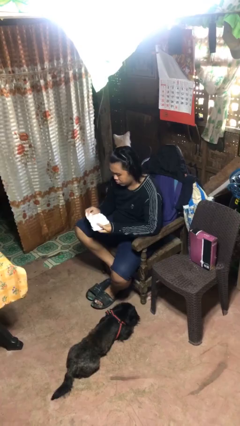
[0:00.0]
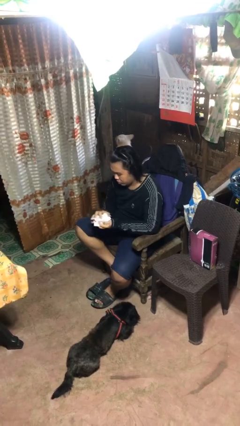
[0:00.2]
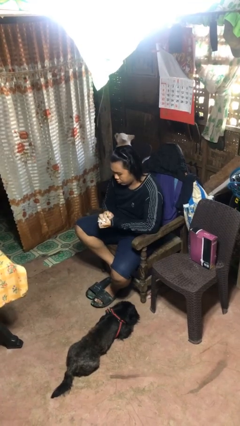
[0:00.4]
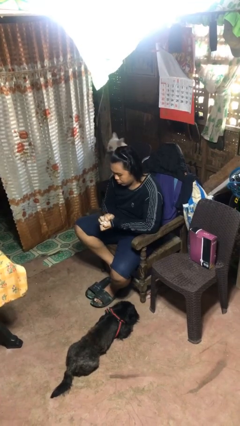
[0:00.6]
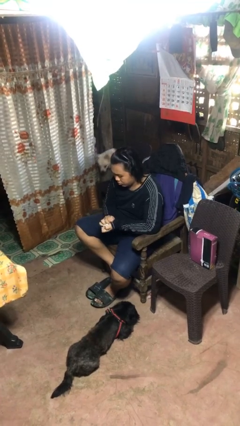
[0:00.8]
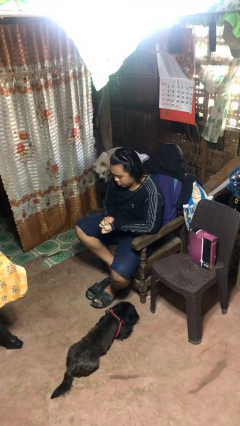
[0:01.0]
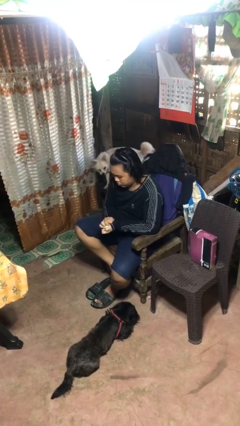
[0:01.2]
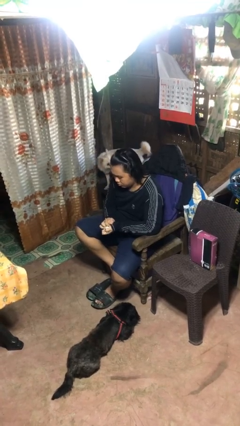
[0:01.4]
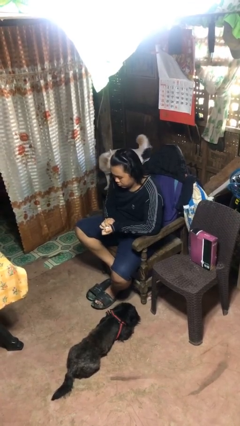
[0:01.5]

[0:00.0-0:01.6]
person crumples paper

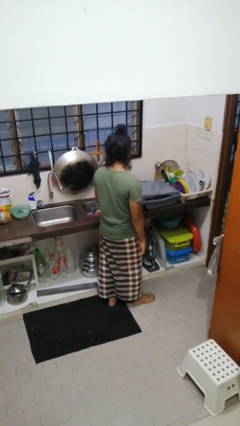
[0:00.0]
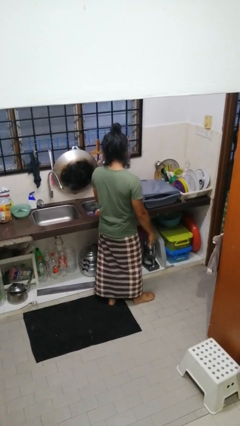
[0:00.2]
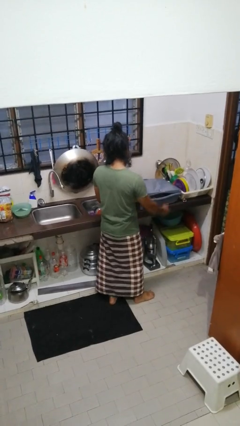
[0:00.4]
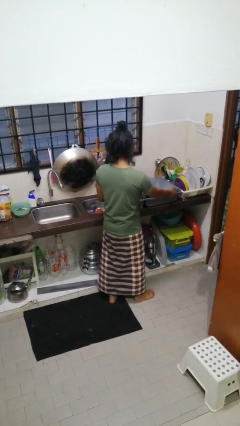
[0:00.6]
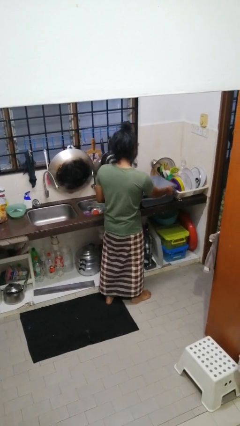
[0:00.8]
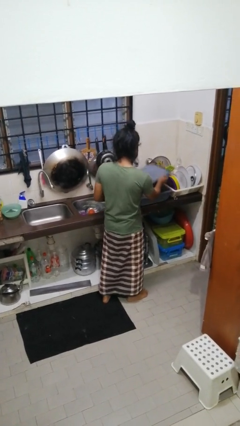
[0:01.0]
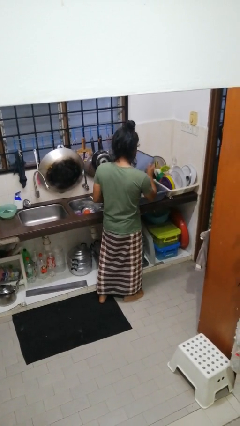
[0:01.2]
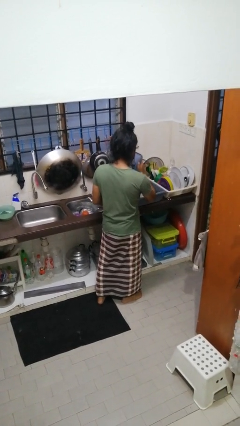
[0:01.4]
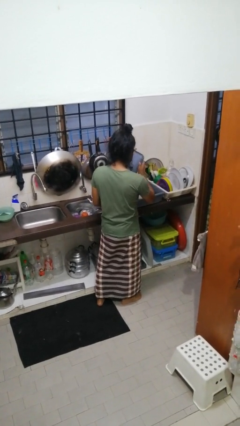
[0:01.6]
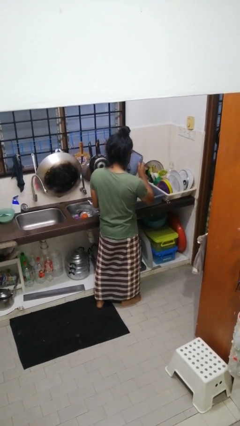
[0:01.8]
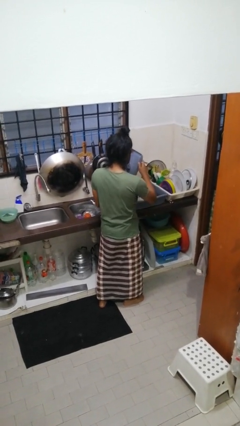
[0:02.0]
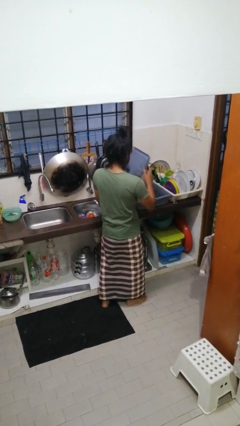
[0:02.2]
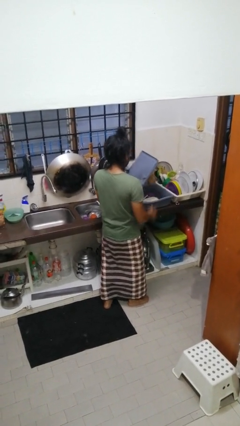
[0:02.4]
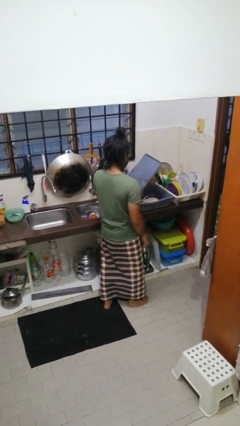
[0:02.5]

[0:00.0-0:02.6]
person opens dishwasher

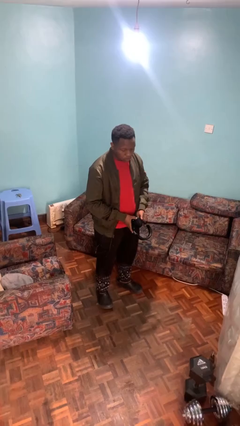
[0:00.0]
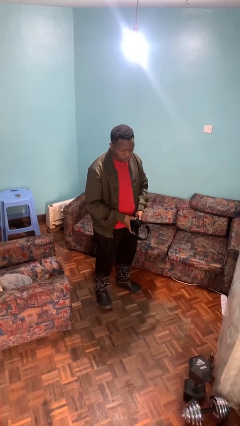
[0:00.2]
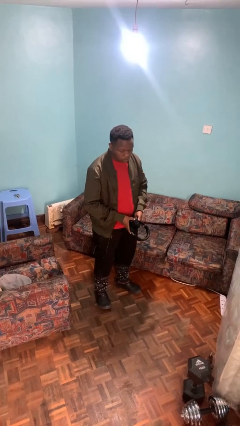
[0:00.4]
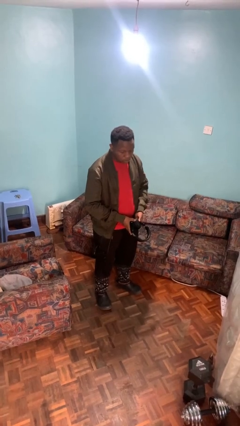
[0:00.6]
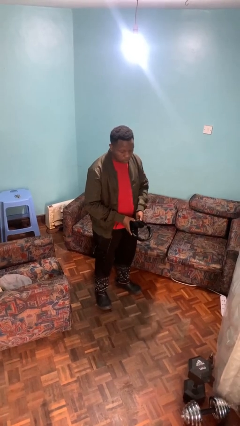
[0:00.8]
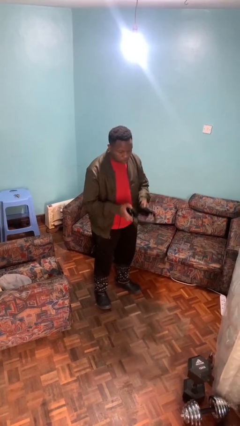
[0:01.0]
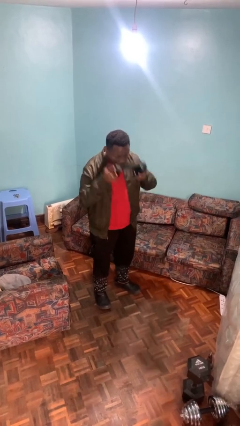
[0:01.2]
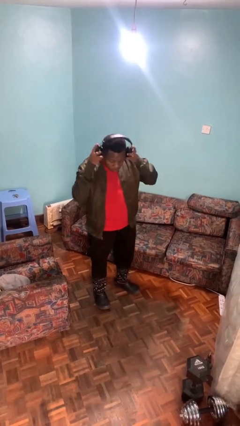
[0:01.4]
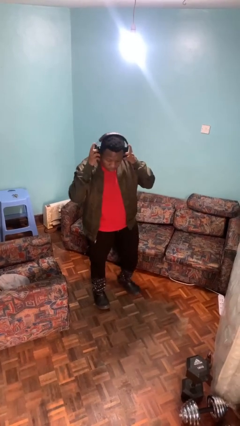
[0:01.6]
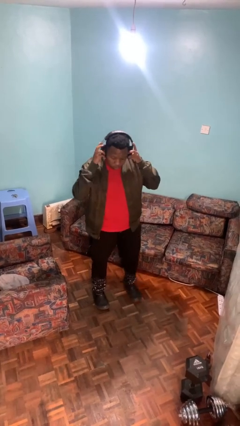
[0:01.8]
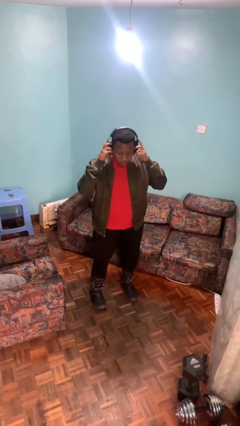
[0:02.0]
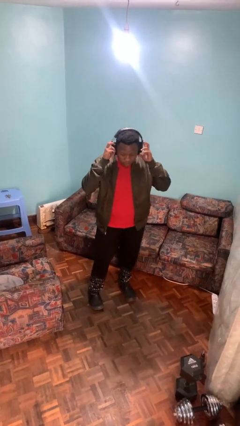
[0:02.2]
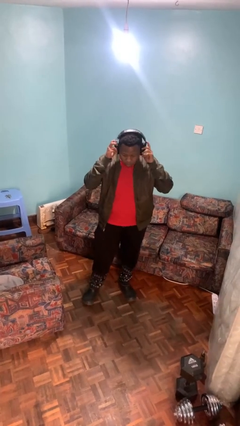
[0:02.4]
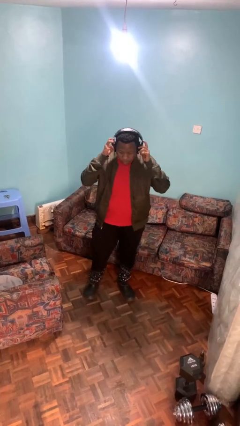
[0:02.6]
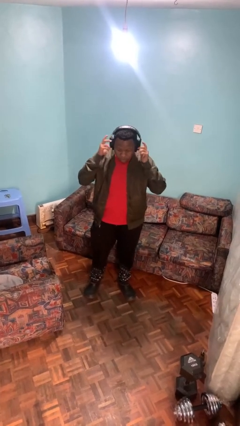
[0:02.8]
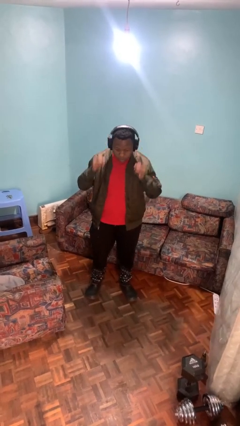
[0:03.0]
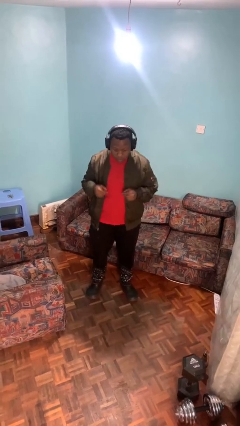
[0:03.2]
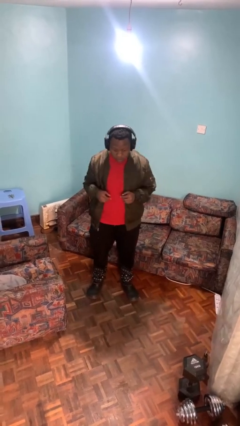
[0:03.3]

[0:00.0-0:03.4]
person puts on headphones

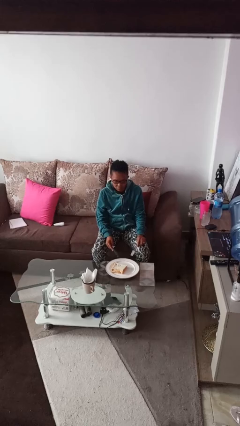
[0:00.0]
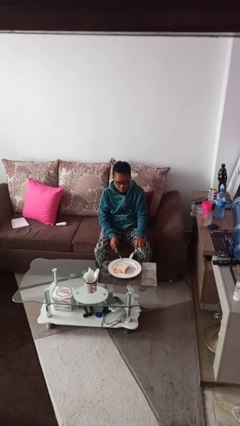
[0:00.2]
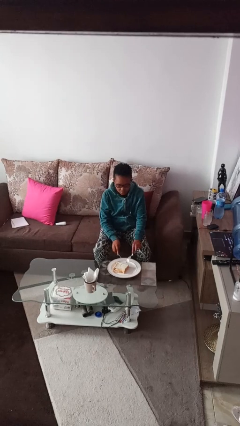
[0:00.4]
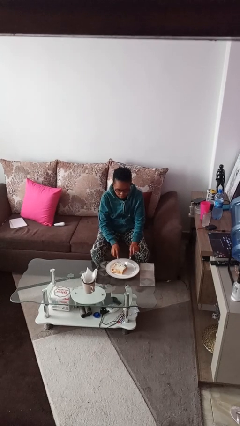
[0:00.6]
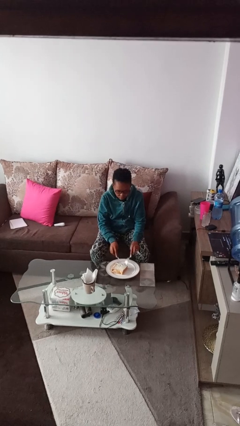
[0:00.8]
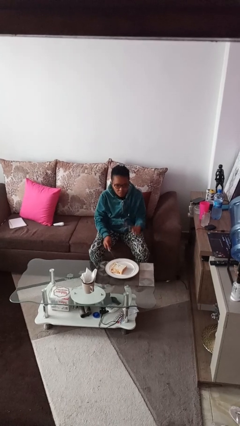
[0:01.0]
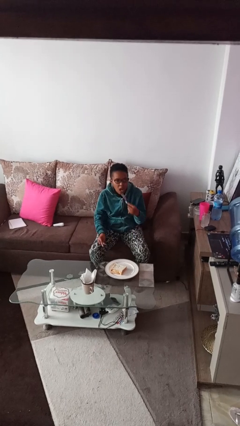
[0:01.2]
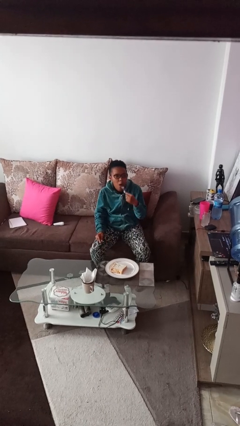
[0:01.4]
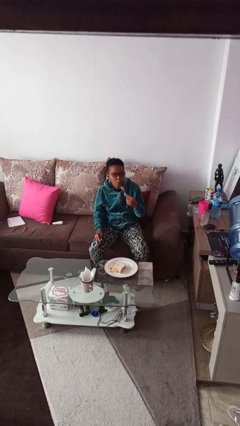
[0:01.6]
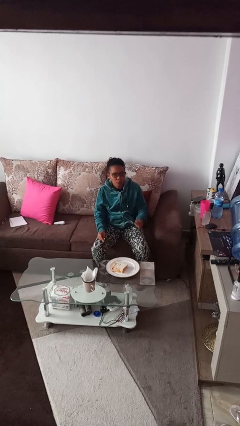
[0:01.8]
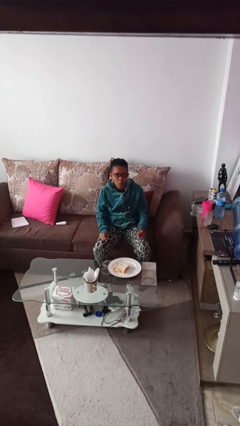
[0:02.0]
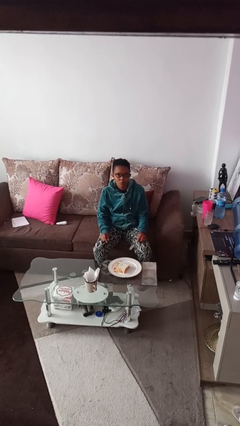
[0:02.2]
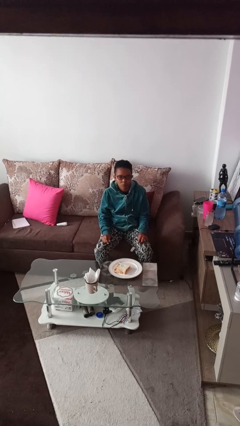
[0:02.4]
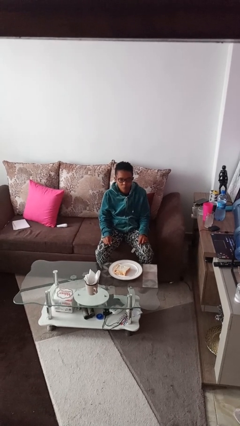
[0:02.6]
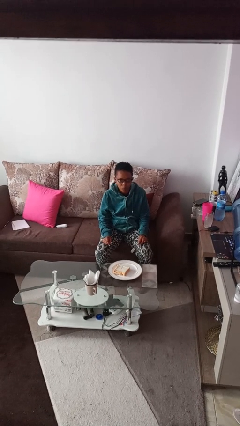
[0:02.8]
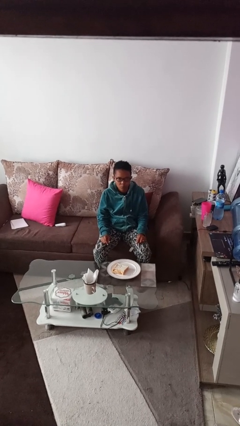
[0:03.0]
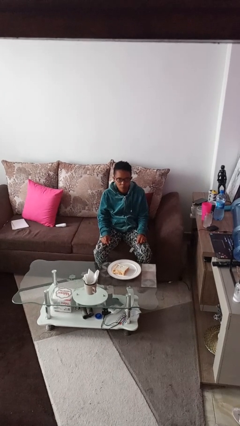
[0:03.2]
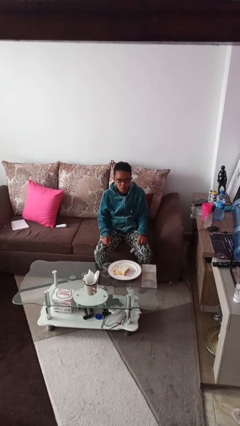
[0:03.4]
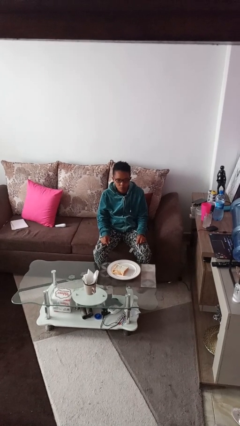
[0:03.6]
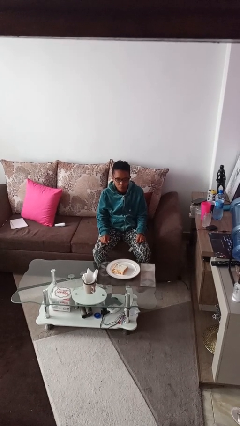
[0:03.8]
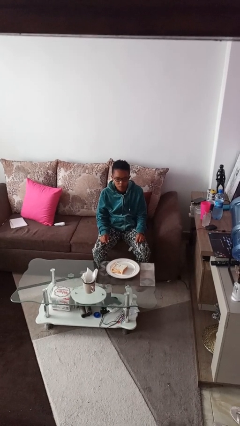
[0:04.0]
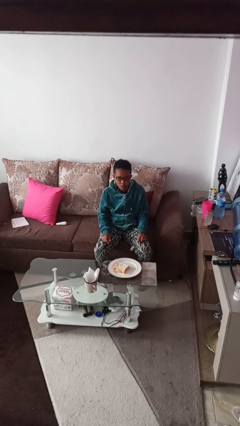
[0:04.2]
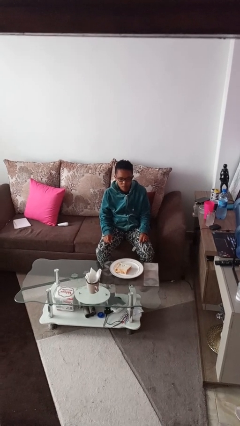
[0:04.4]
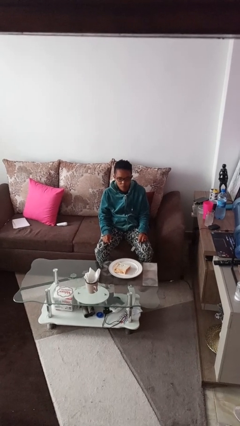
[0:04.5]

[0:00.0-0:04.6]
person eats with utensil

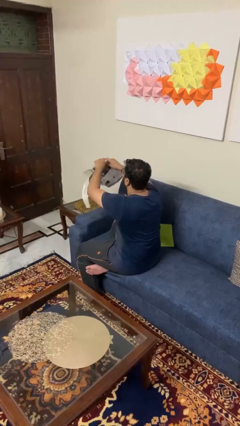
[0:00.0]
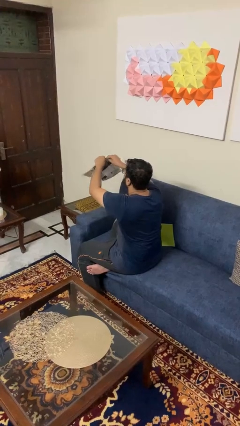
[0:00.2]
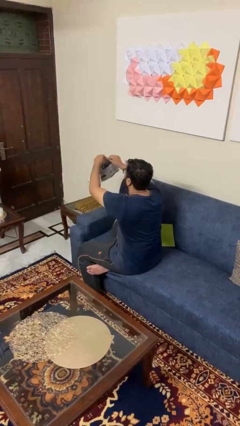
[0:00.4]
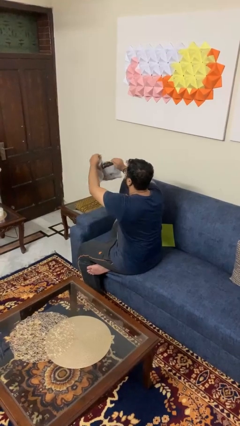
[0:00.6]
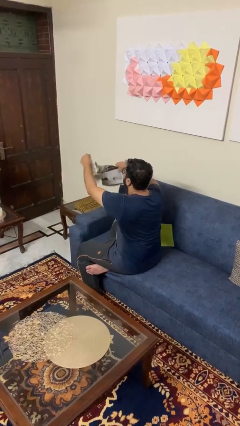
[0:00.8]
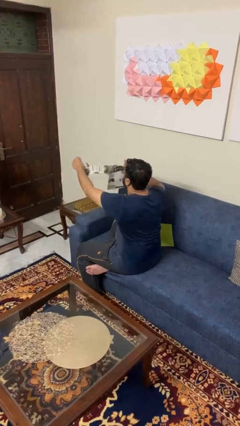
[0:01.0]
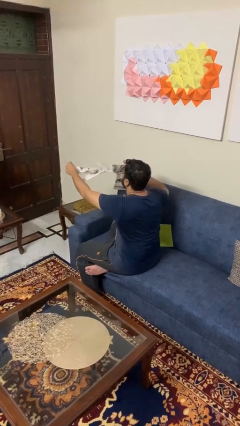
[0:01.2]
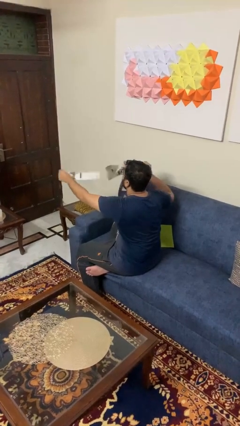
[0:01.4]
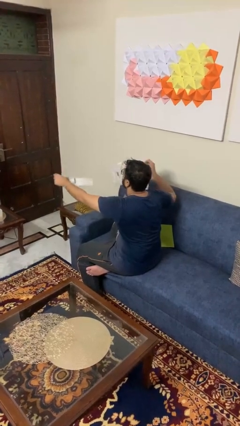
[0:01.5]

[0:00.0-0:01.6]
person tears paper

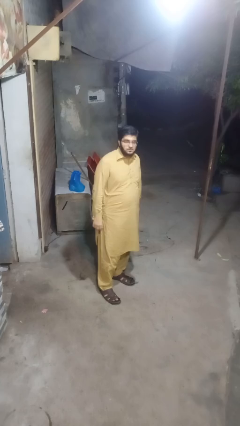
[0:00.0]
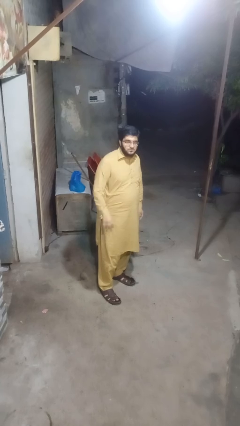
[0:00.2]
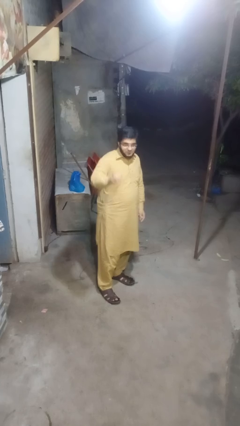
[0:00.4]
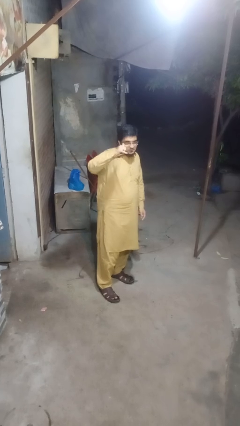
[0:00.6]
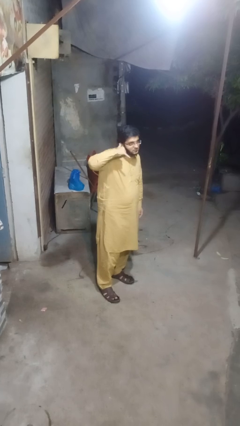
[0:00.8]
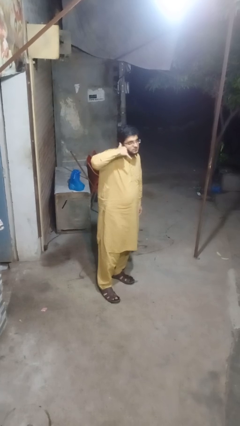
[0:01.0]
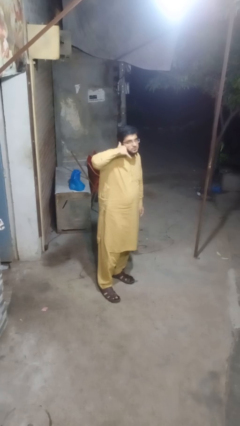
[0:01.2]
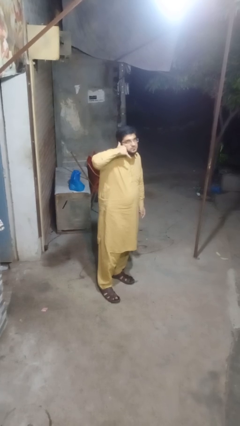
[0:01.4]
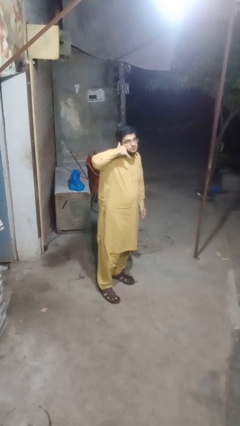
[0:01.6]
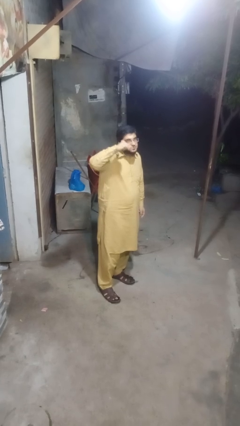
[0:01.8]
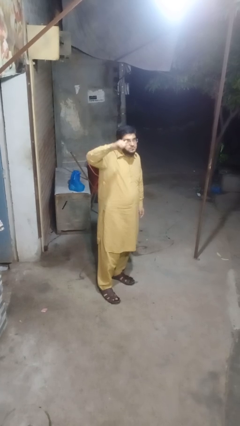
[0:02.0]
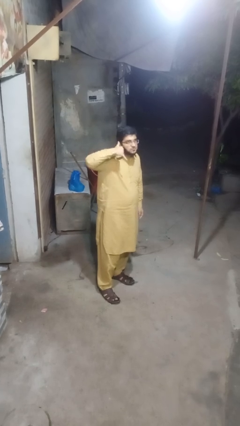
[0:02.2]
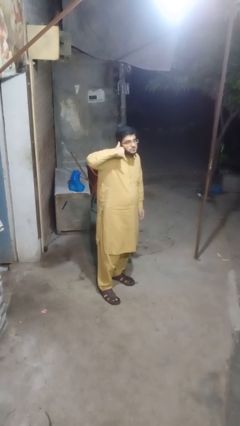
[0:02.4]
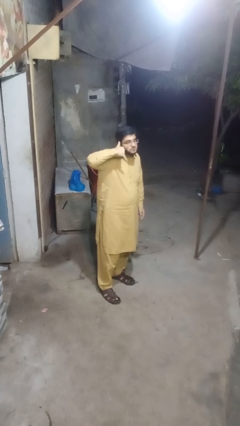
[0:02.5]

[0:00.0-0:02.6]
person gestures call me

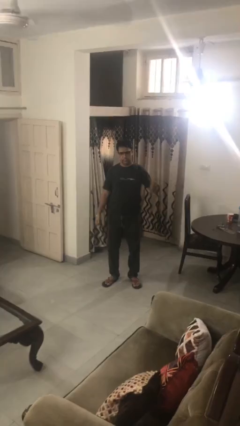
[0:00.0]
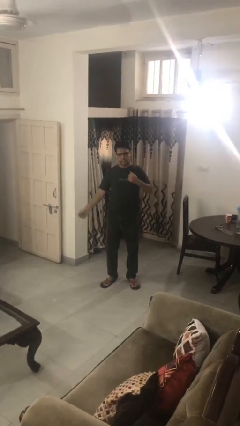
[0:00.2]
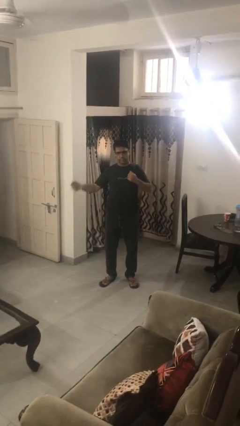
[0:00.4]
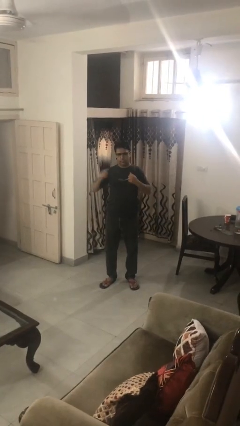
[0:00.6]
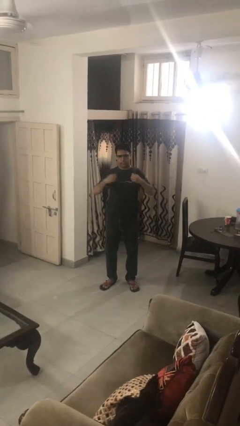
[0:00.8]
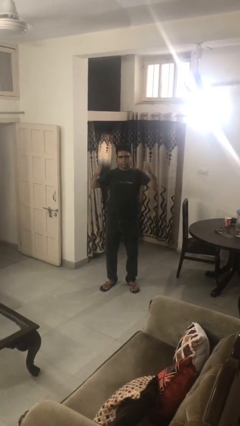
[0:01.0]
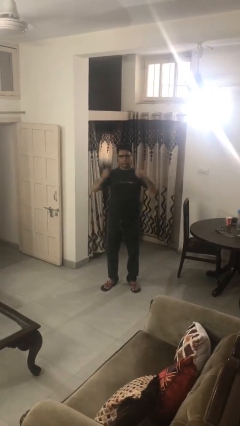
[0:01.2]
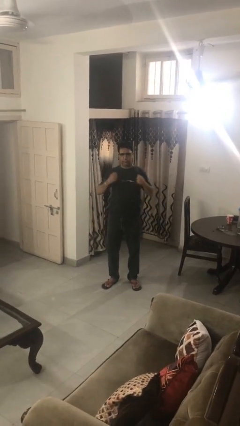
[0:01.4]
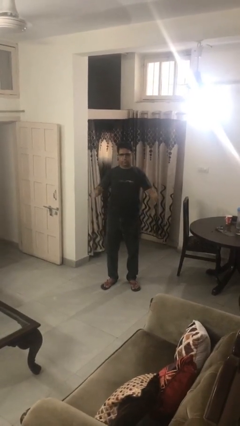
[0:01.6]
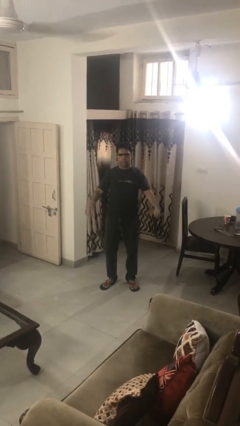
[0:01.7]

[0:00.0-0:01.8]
person drums on chest
